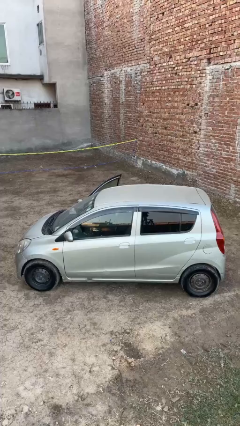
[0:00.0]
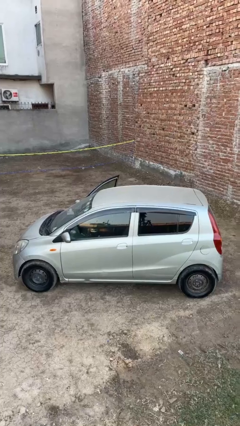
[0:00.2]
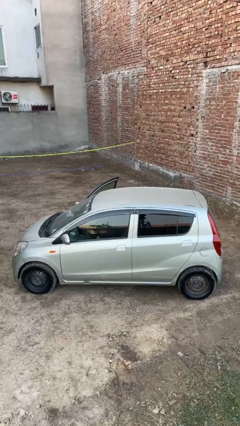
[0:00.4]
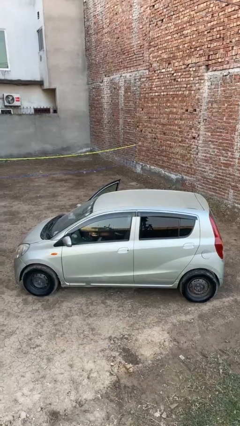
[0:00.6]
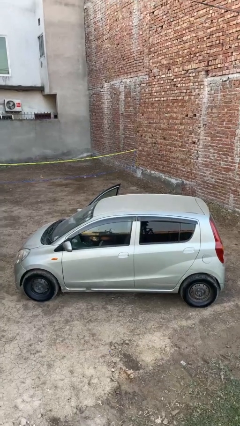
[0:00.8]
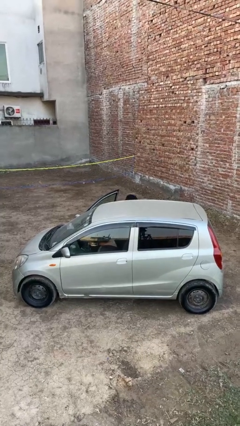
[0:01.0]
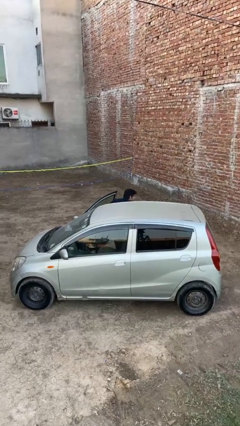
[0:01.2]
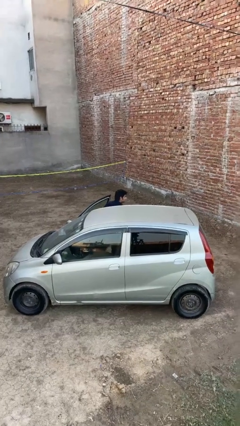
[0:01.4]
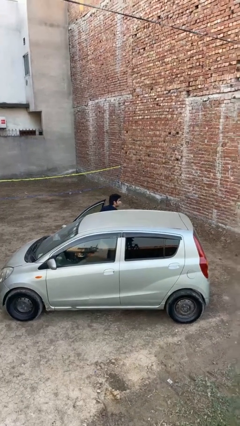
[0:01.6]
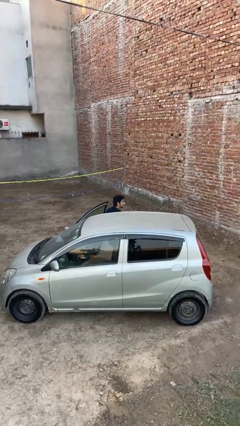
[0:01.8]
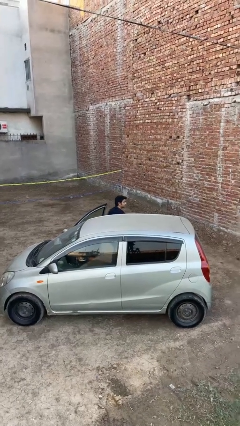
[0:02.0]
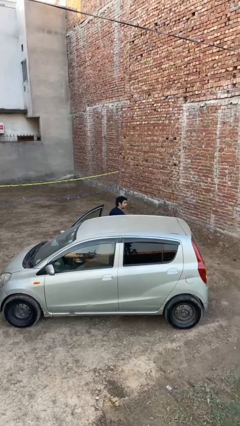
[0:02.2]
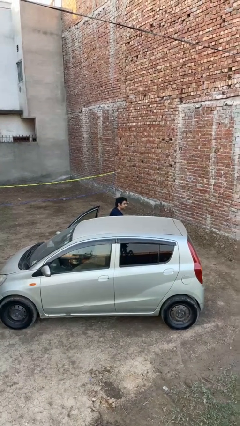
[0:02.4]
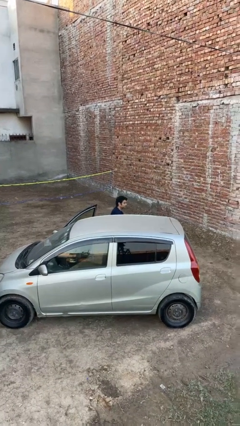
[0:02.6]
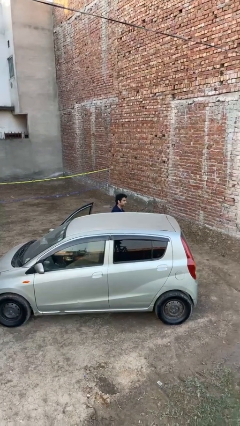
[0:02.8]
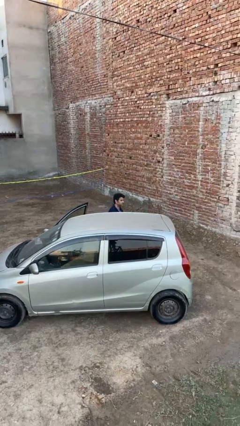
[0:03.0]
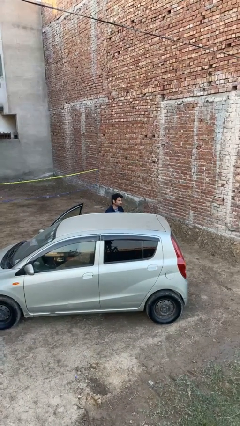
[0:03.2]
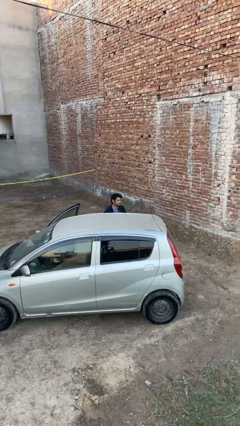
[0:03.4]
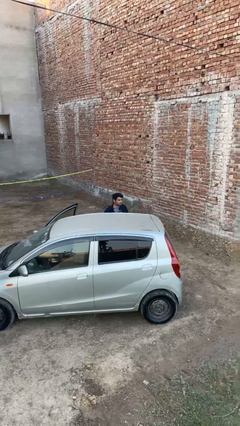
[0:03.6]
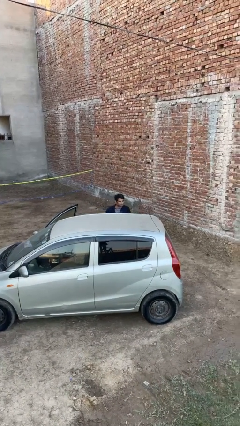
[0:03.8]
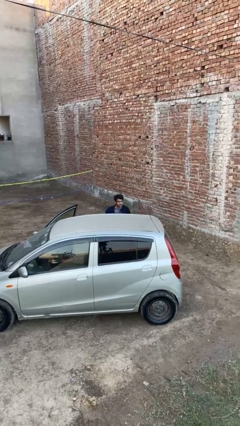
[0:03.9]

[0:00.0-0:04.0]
person exits car

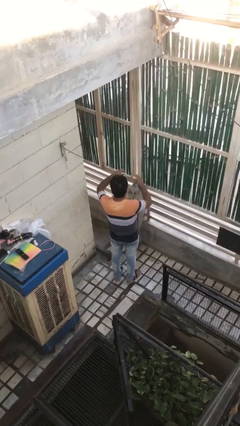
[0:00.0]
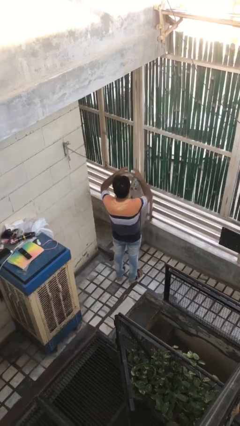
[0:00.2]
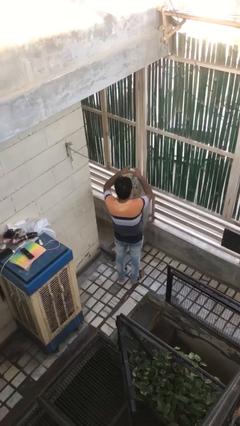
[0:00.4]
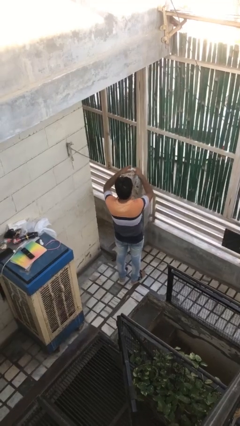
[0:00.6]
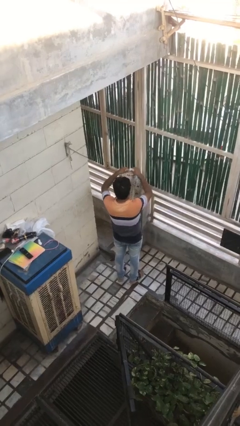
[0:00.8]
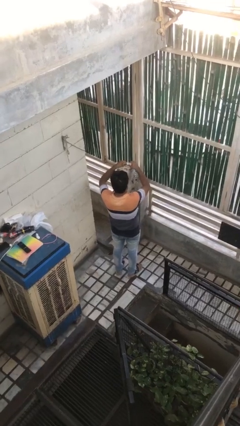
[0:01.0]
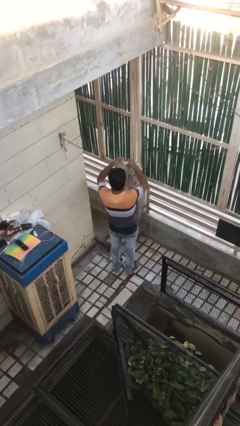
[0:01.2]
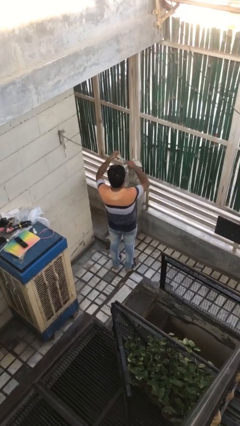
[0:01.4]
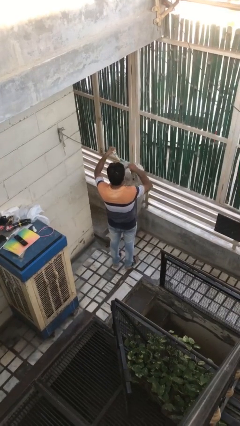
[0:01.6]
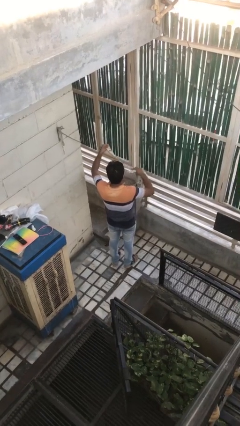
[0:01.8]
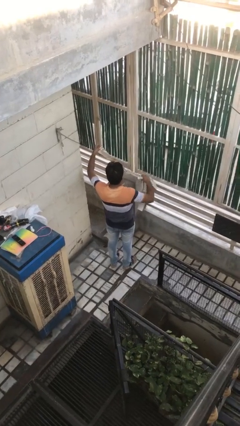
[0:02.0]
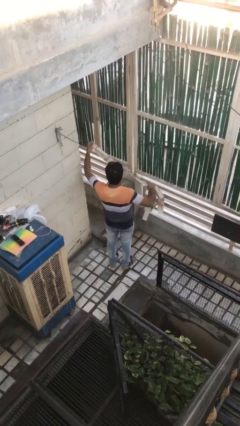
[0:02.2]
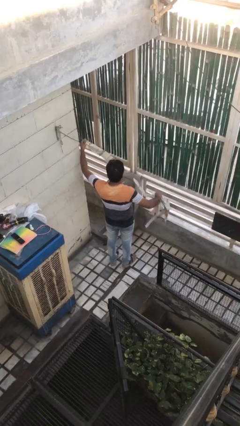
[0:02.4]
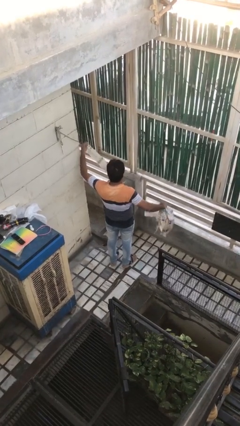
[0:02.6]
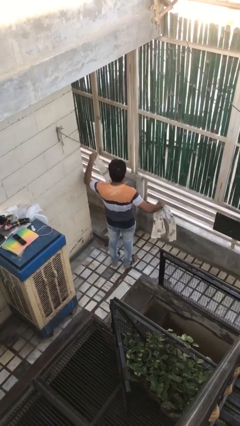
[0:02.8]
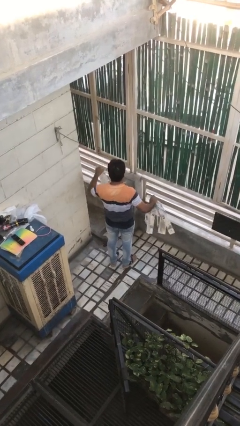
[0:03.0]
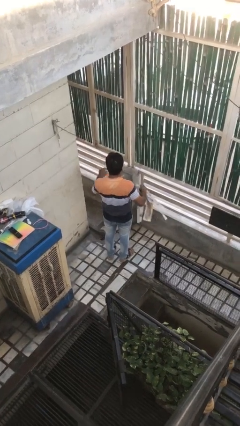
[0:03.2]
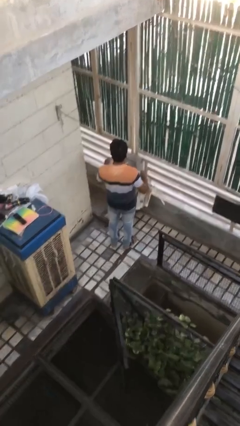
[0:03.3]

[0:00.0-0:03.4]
person tears paper

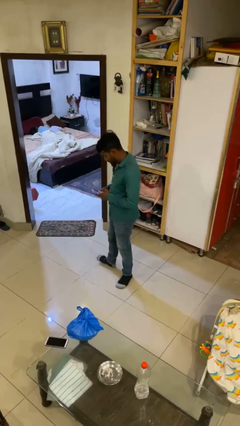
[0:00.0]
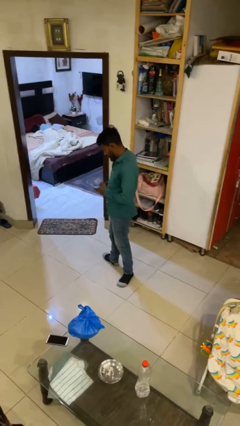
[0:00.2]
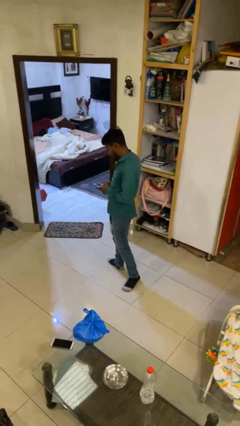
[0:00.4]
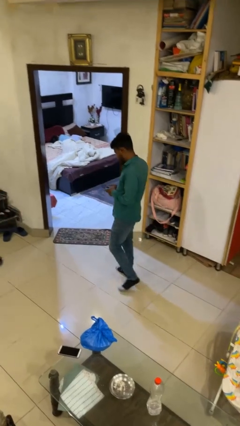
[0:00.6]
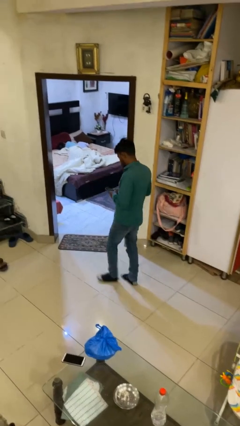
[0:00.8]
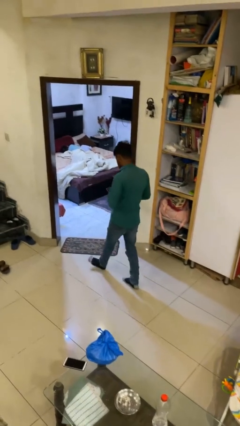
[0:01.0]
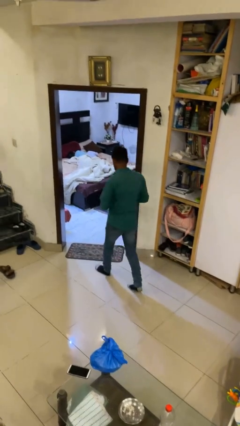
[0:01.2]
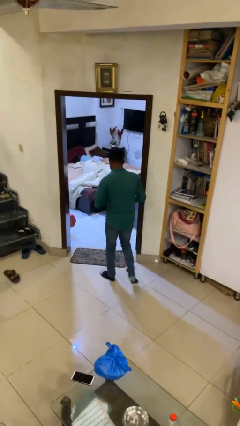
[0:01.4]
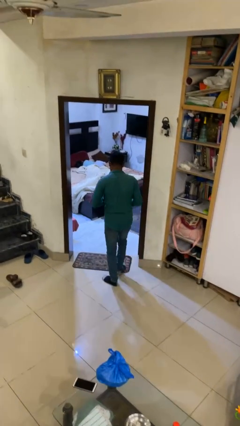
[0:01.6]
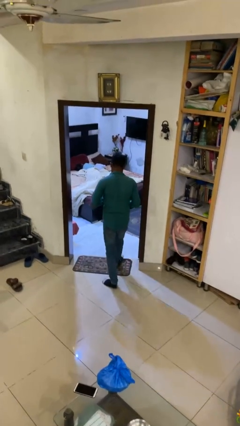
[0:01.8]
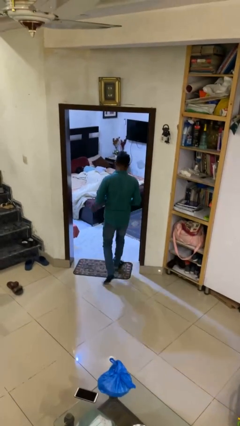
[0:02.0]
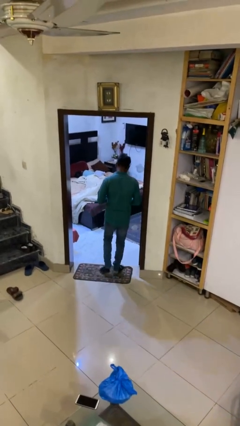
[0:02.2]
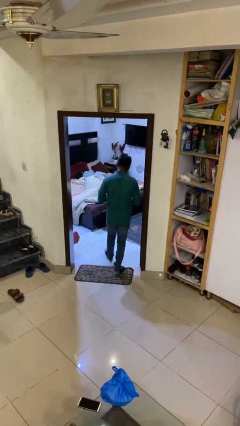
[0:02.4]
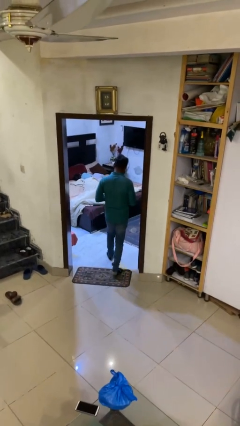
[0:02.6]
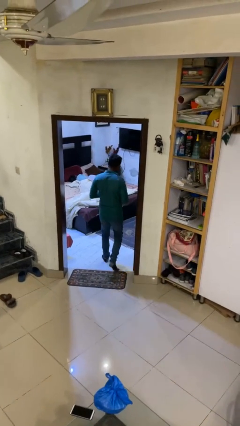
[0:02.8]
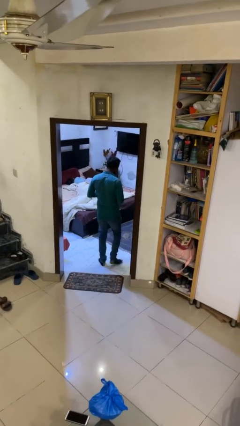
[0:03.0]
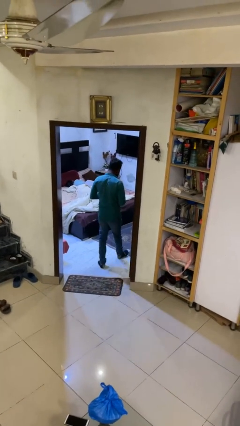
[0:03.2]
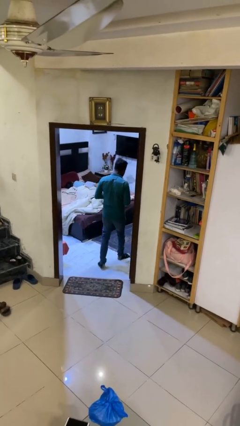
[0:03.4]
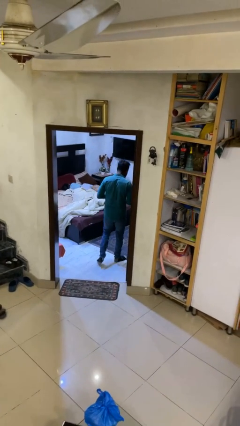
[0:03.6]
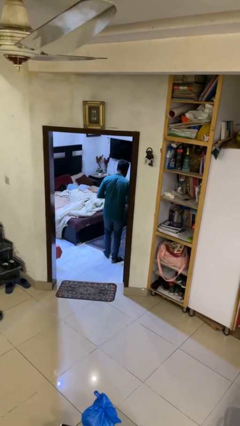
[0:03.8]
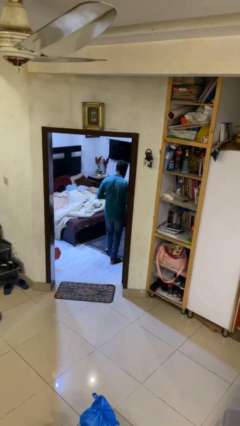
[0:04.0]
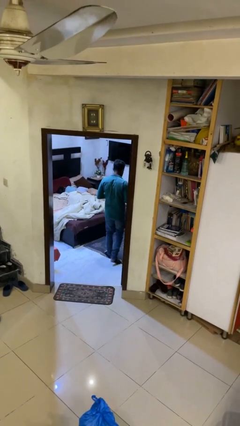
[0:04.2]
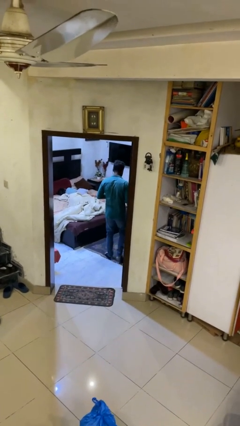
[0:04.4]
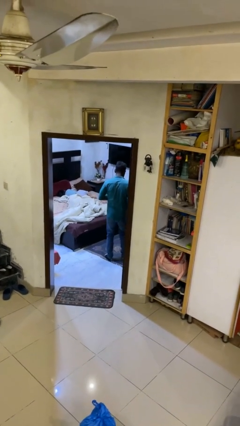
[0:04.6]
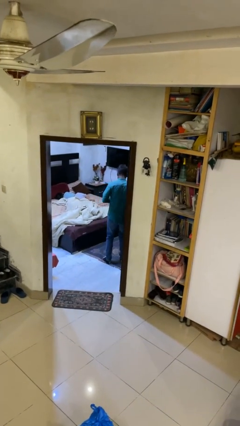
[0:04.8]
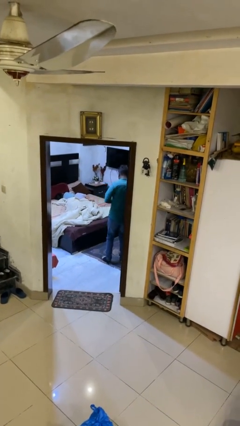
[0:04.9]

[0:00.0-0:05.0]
person exits scene through structure

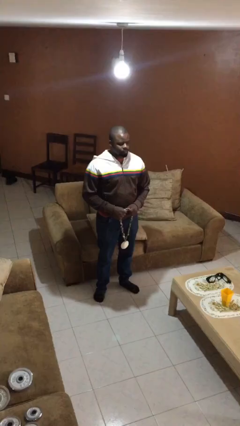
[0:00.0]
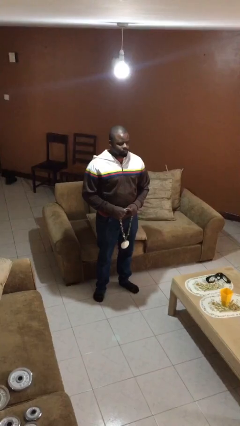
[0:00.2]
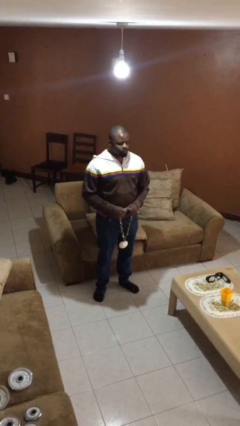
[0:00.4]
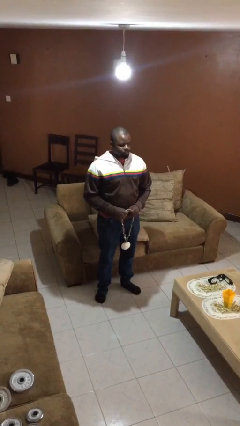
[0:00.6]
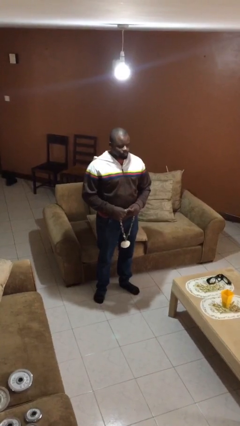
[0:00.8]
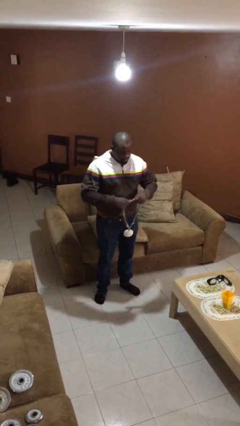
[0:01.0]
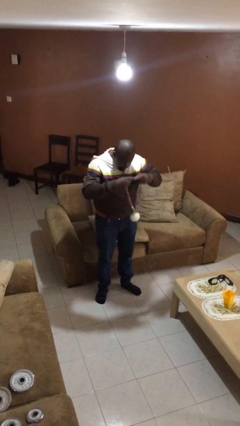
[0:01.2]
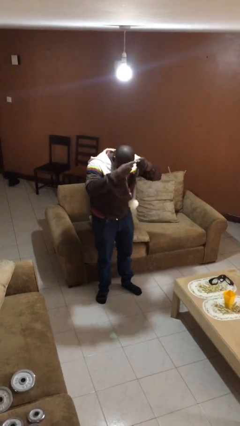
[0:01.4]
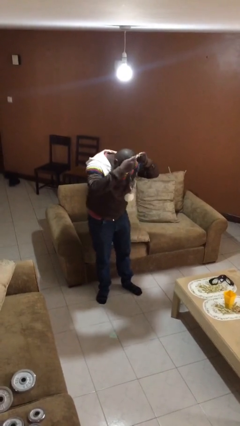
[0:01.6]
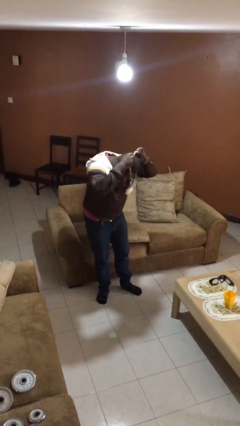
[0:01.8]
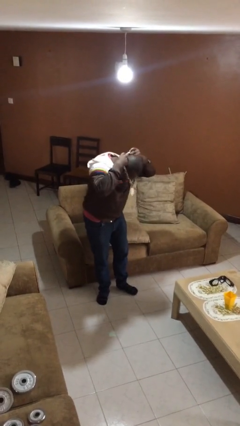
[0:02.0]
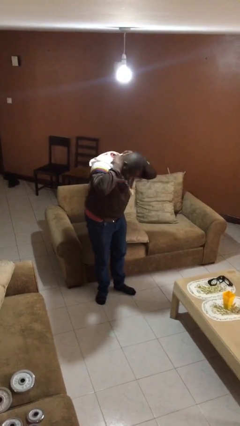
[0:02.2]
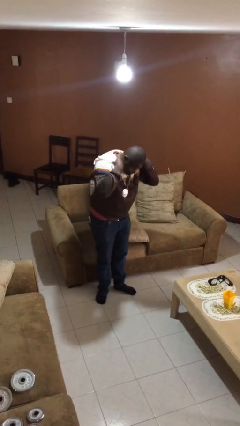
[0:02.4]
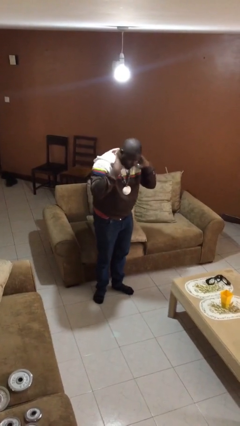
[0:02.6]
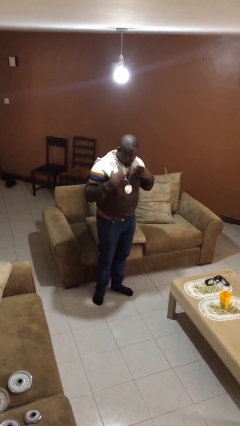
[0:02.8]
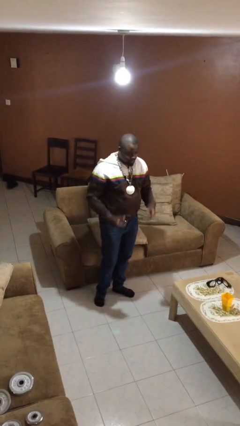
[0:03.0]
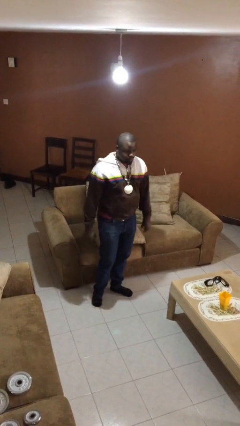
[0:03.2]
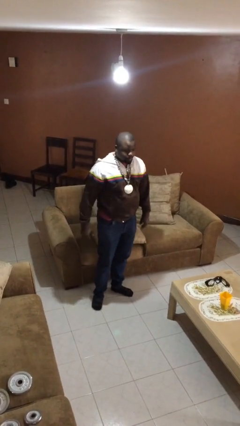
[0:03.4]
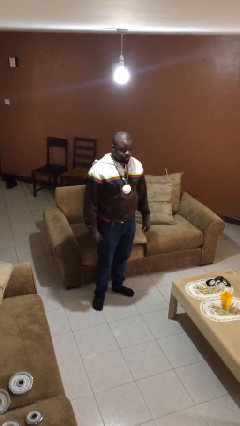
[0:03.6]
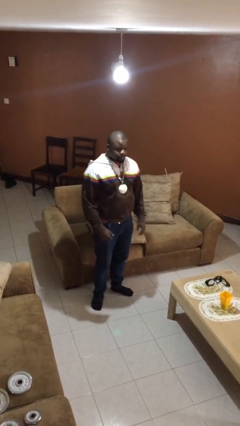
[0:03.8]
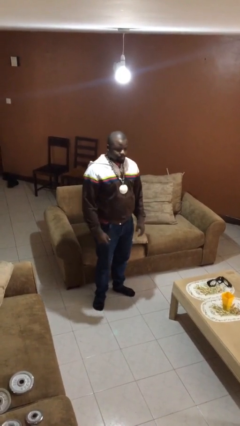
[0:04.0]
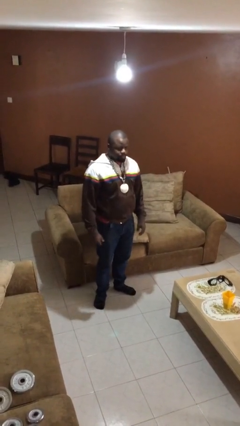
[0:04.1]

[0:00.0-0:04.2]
person puts on necklace

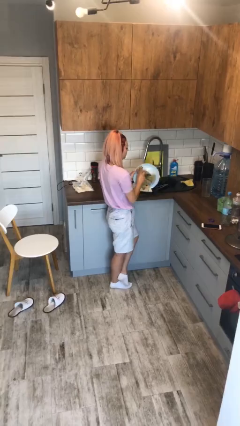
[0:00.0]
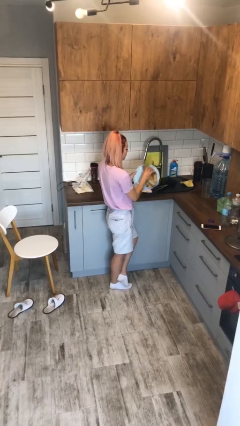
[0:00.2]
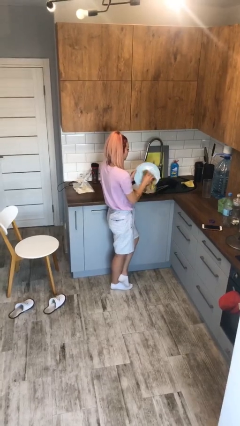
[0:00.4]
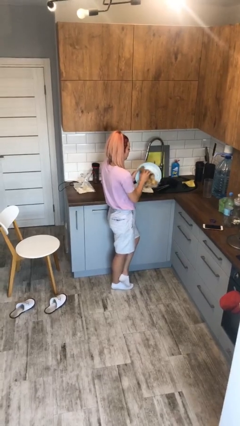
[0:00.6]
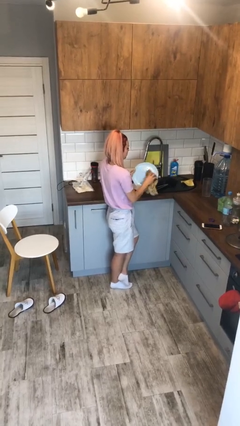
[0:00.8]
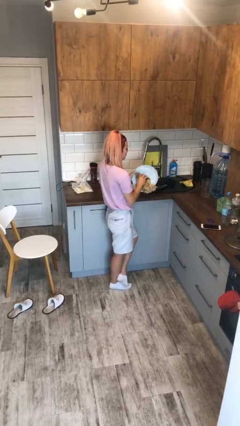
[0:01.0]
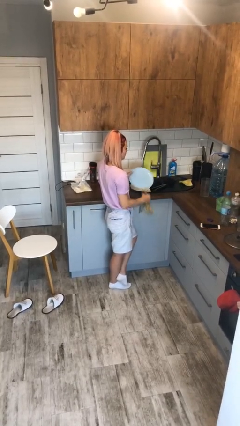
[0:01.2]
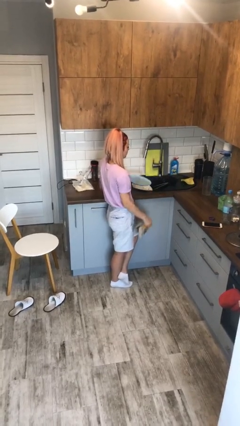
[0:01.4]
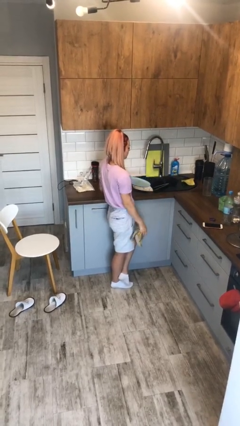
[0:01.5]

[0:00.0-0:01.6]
person dries dish
